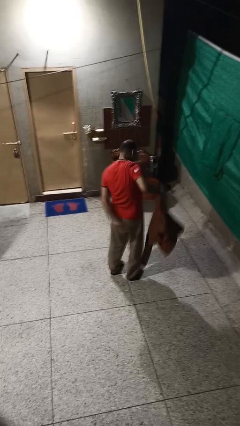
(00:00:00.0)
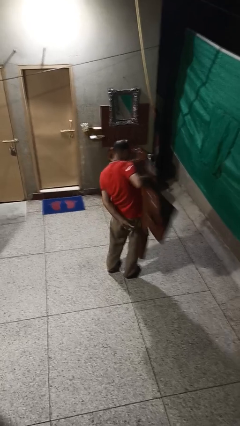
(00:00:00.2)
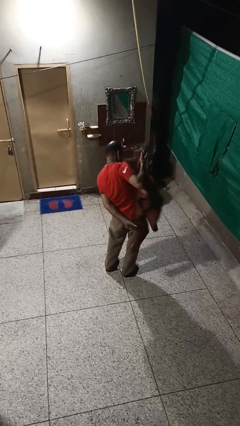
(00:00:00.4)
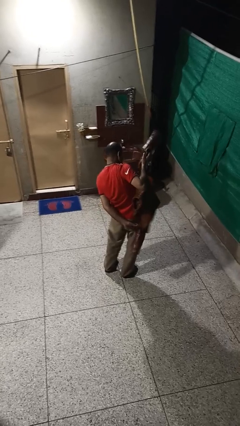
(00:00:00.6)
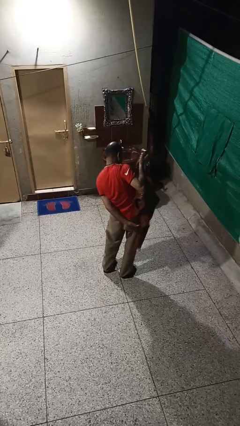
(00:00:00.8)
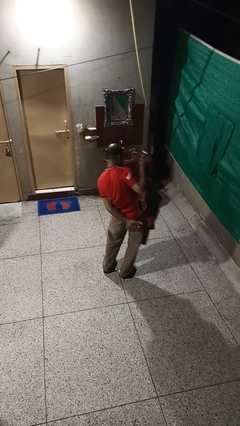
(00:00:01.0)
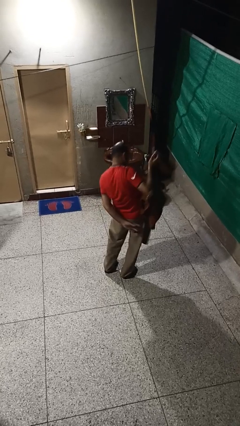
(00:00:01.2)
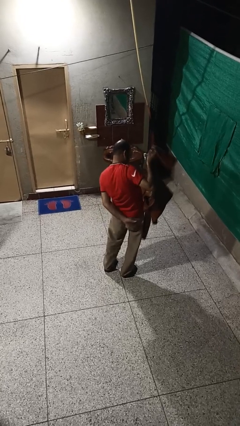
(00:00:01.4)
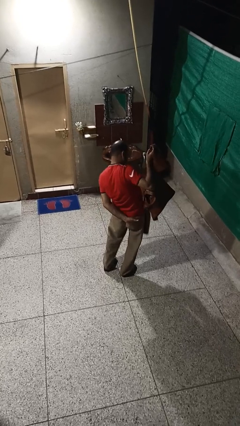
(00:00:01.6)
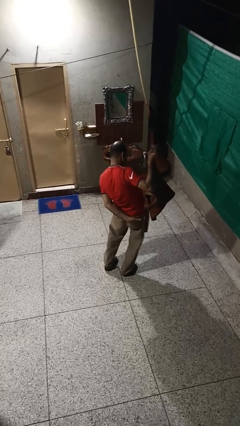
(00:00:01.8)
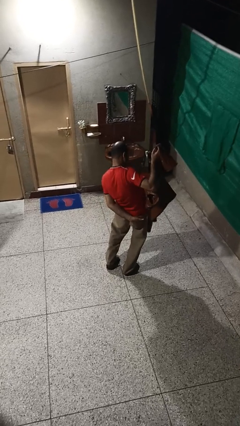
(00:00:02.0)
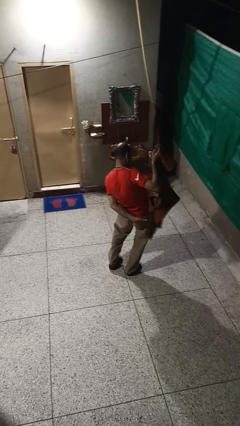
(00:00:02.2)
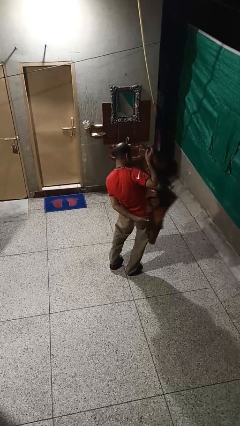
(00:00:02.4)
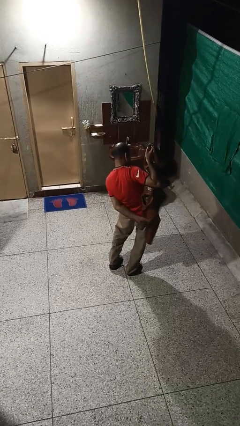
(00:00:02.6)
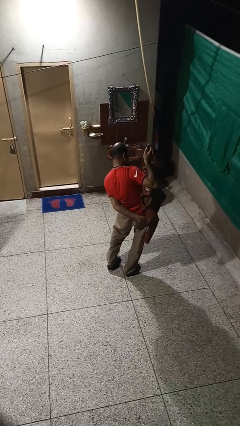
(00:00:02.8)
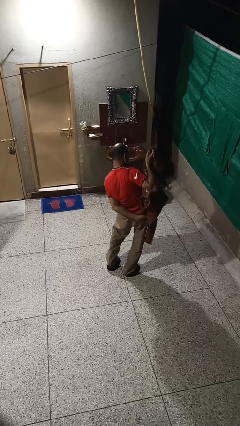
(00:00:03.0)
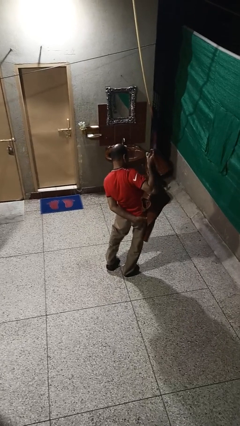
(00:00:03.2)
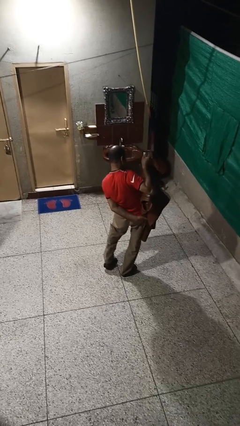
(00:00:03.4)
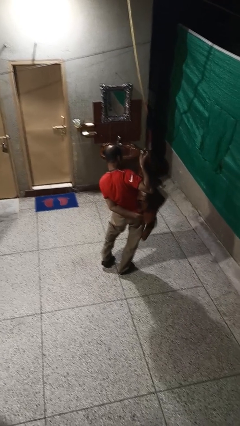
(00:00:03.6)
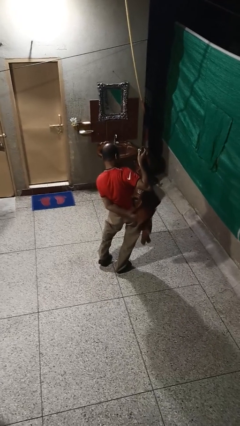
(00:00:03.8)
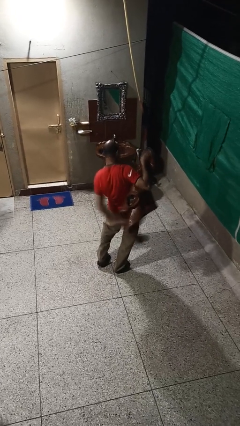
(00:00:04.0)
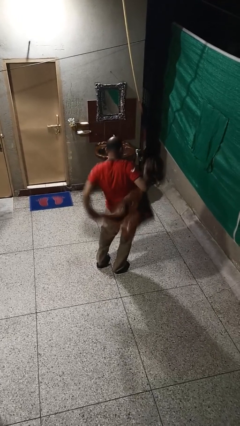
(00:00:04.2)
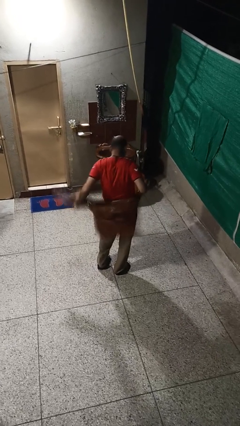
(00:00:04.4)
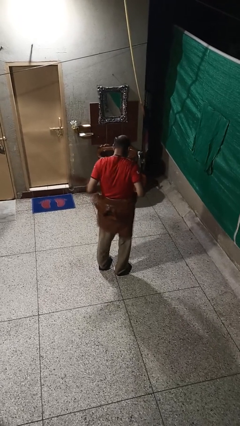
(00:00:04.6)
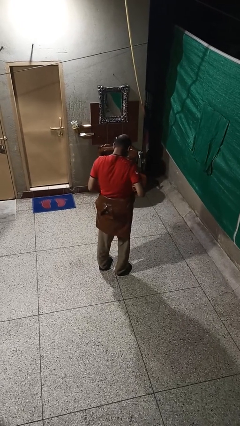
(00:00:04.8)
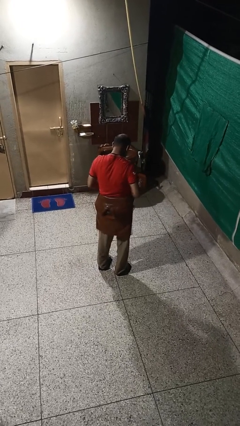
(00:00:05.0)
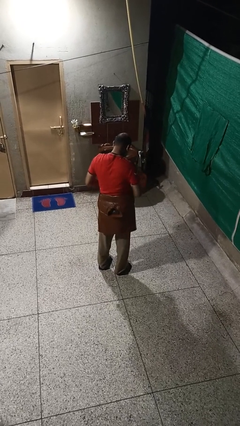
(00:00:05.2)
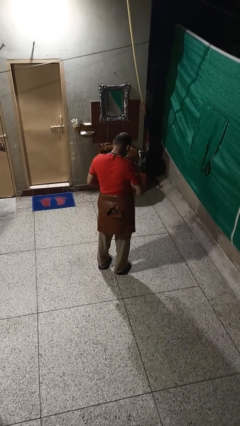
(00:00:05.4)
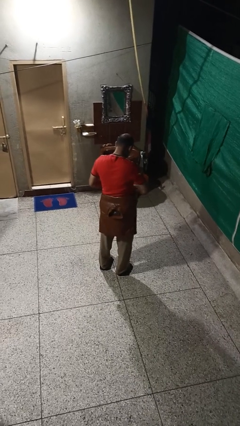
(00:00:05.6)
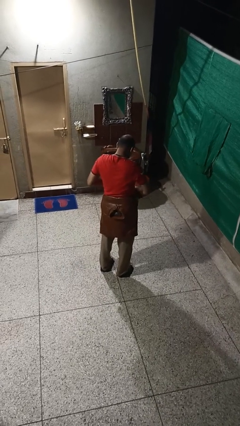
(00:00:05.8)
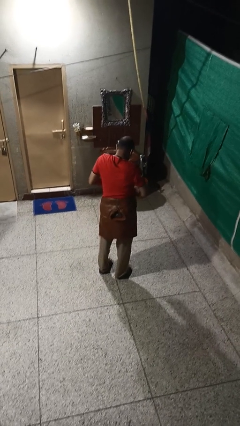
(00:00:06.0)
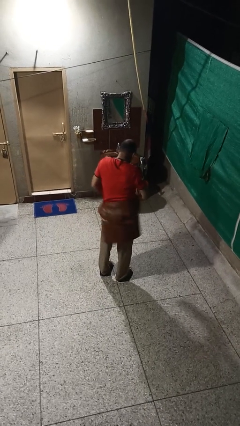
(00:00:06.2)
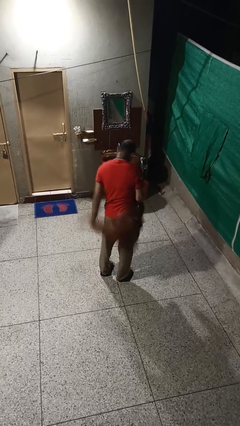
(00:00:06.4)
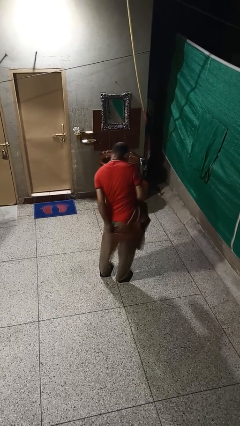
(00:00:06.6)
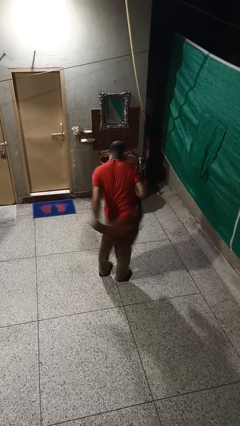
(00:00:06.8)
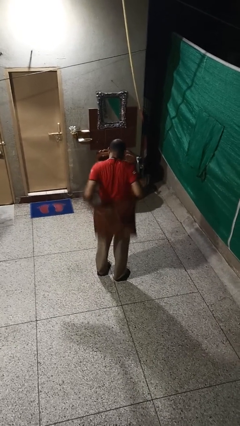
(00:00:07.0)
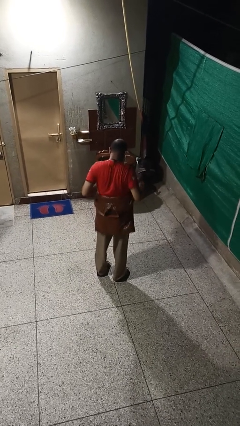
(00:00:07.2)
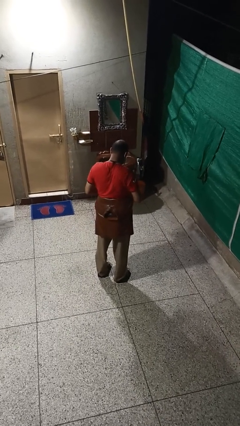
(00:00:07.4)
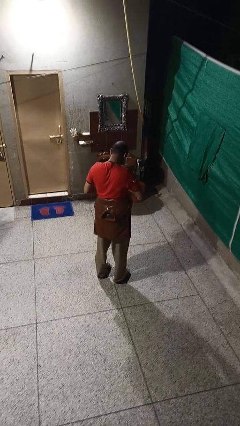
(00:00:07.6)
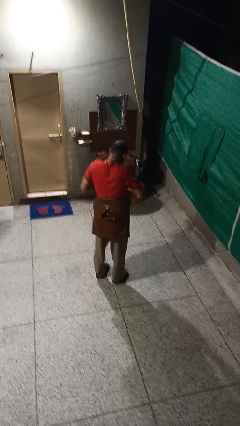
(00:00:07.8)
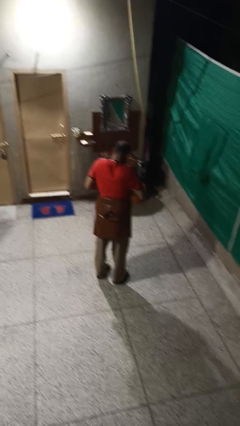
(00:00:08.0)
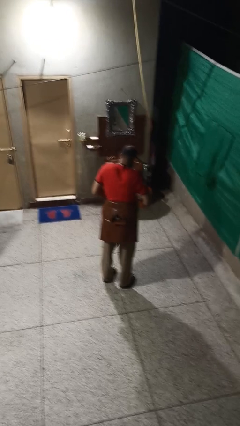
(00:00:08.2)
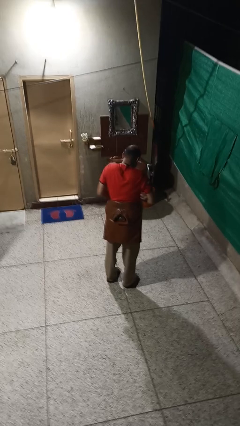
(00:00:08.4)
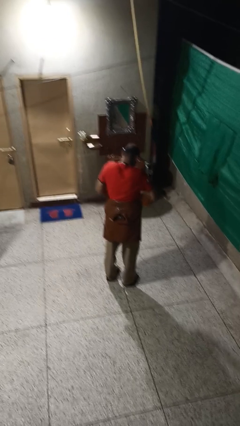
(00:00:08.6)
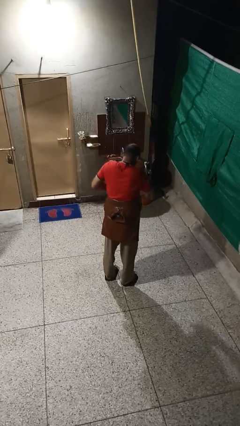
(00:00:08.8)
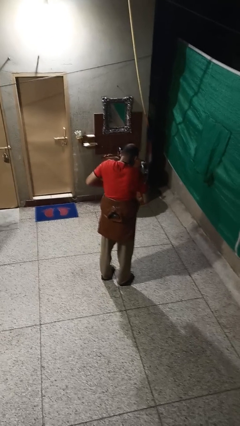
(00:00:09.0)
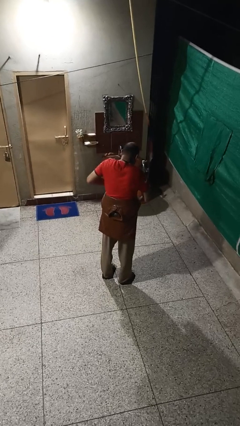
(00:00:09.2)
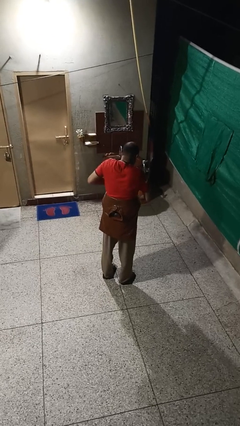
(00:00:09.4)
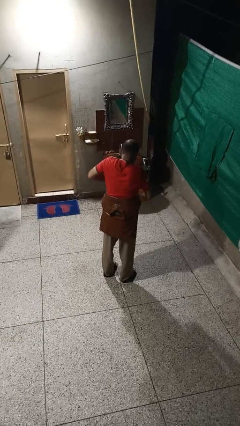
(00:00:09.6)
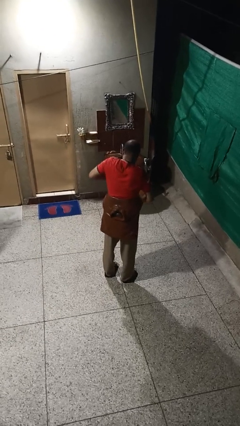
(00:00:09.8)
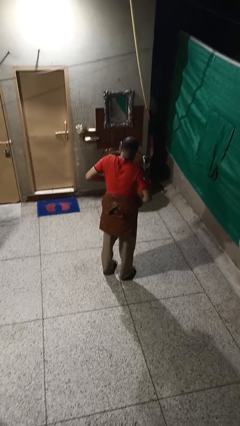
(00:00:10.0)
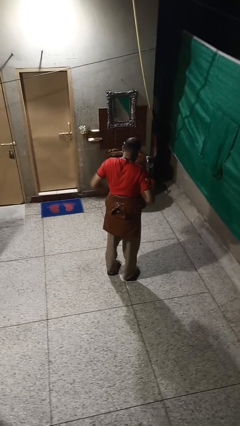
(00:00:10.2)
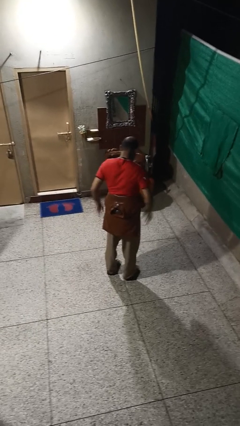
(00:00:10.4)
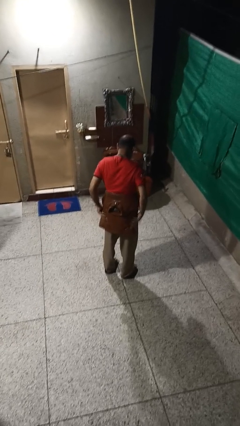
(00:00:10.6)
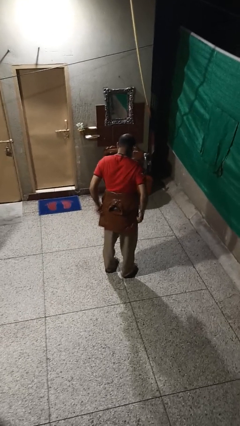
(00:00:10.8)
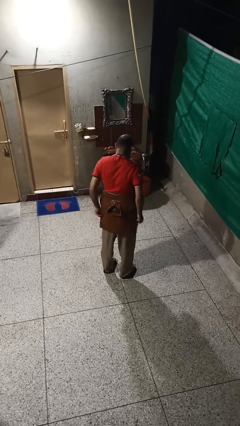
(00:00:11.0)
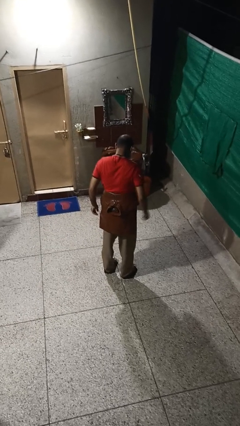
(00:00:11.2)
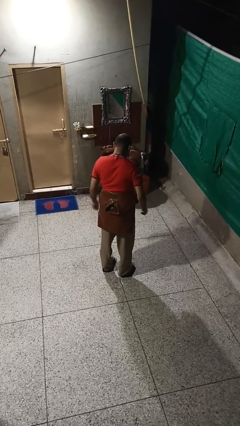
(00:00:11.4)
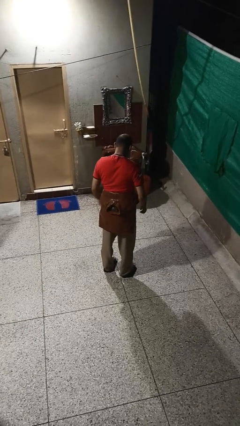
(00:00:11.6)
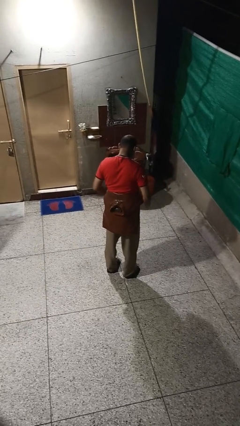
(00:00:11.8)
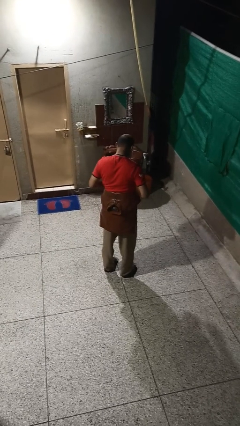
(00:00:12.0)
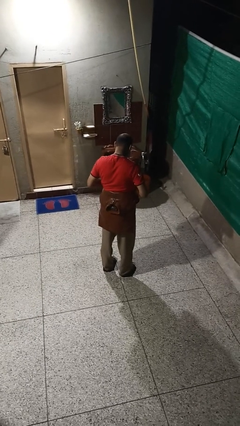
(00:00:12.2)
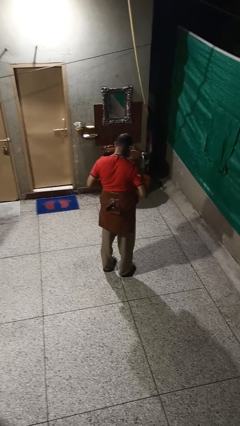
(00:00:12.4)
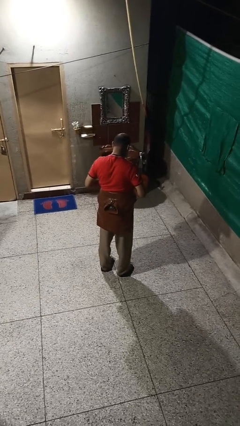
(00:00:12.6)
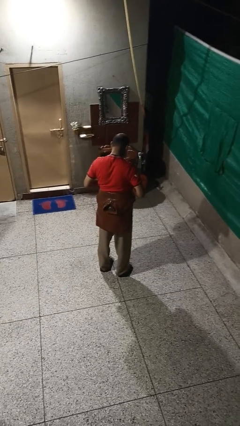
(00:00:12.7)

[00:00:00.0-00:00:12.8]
person ties jacket around waist

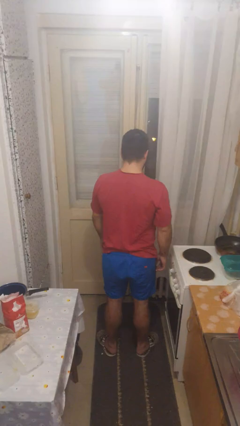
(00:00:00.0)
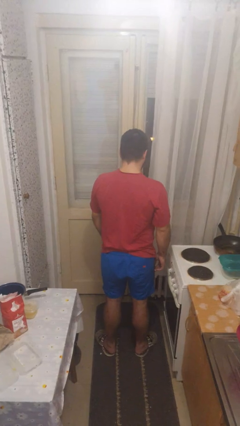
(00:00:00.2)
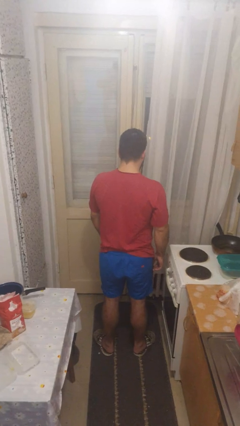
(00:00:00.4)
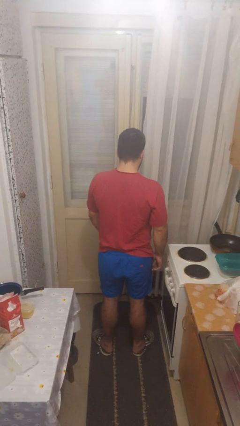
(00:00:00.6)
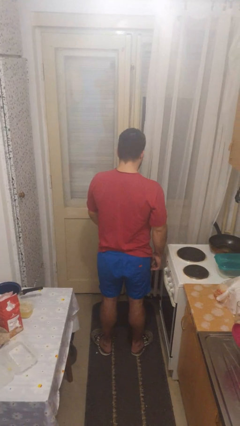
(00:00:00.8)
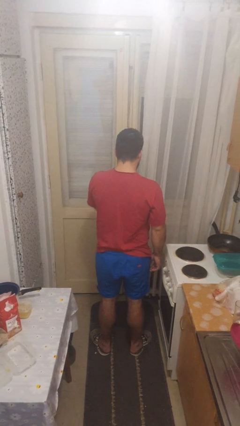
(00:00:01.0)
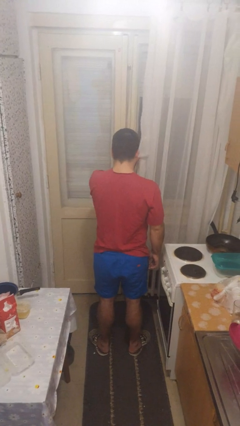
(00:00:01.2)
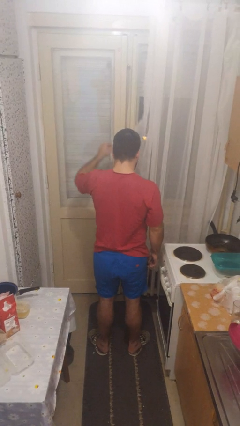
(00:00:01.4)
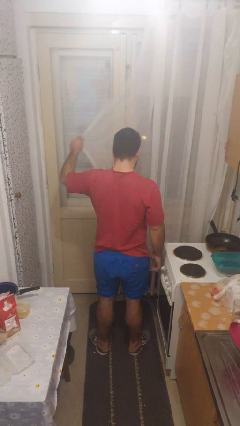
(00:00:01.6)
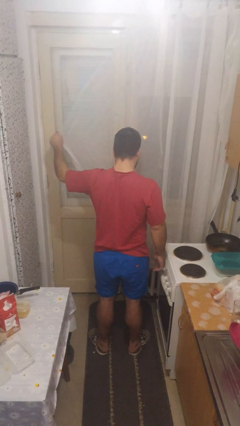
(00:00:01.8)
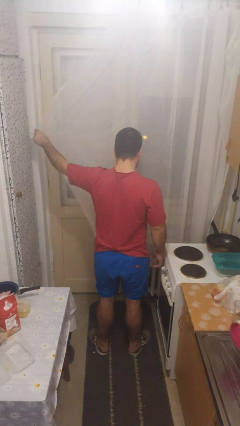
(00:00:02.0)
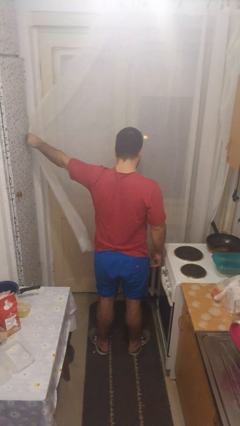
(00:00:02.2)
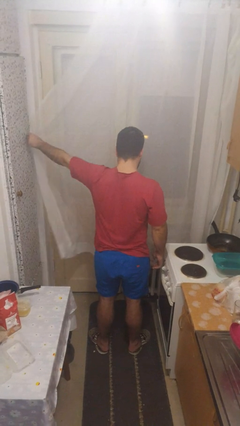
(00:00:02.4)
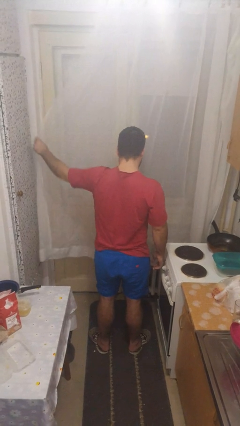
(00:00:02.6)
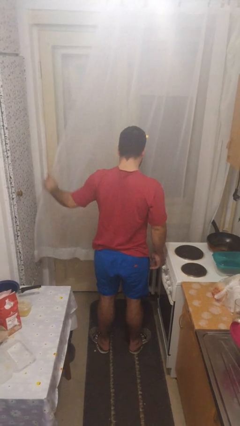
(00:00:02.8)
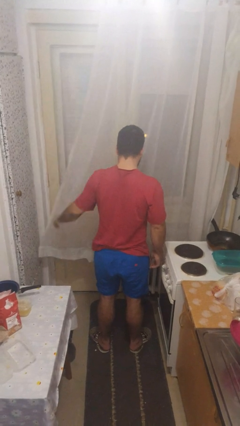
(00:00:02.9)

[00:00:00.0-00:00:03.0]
person closes curtains

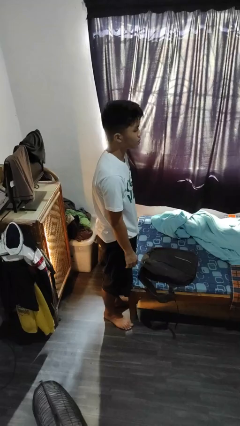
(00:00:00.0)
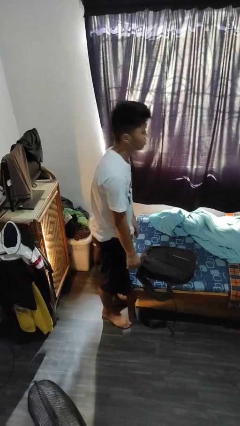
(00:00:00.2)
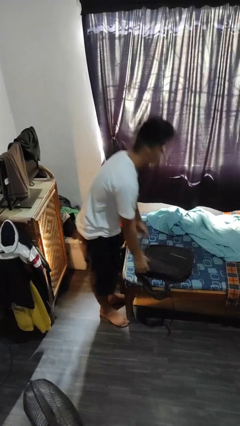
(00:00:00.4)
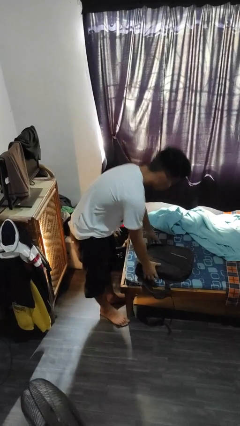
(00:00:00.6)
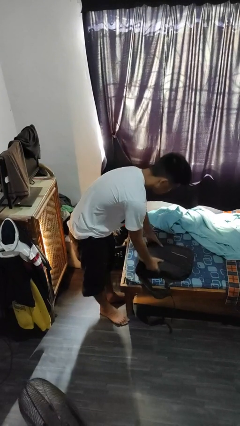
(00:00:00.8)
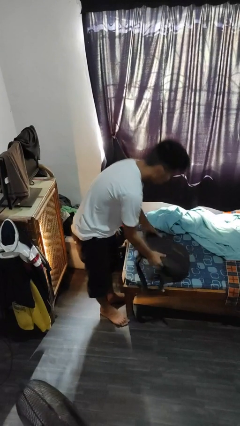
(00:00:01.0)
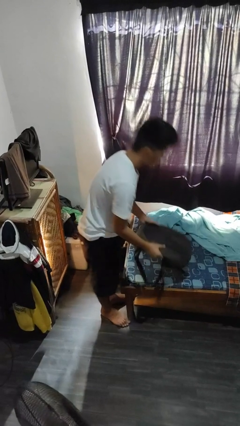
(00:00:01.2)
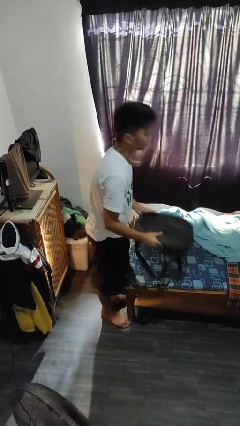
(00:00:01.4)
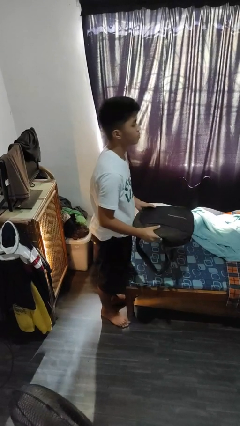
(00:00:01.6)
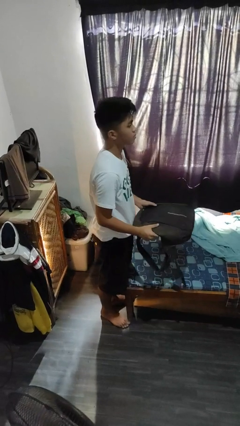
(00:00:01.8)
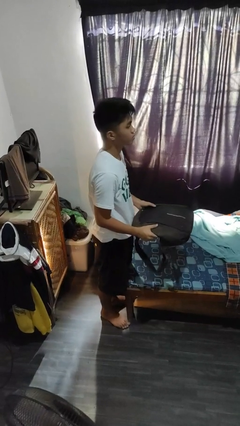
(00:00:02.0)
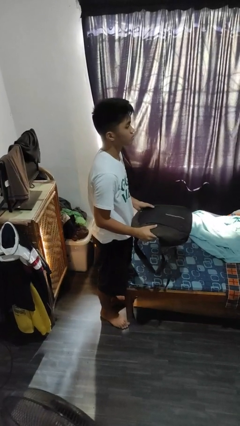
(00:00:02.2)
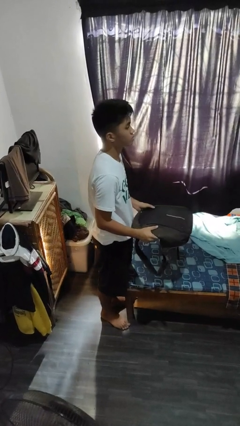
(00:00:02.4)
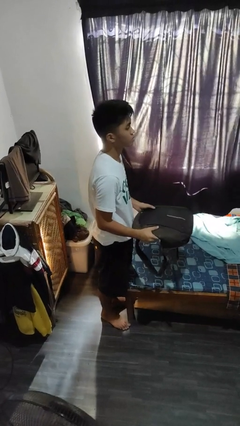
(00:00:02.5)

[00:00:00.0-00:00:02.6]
person picks up object from bed
